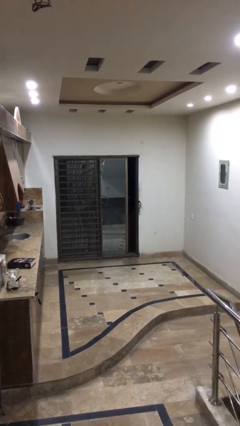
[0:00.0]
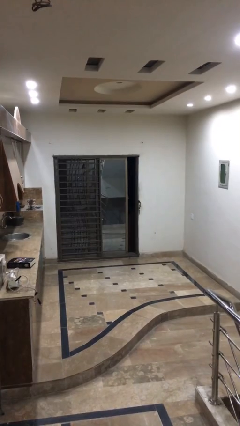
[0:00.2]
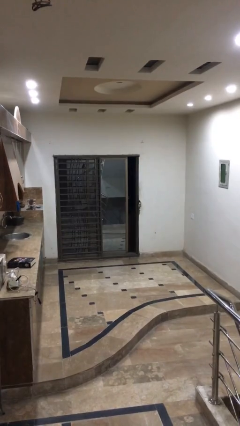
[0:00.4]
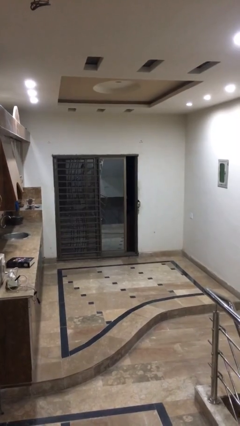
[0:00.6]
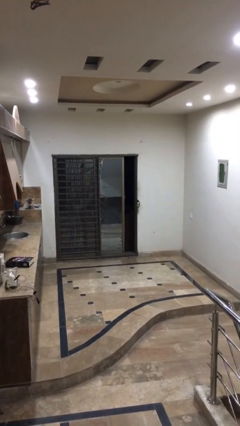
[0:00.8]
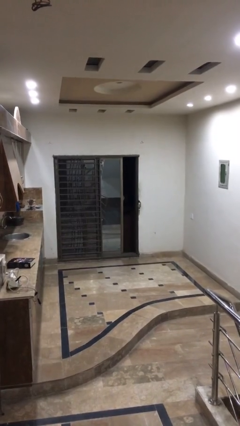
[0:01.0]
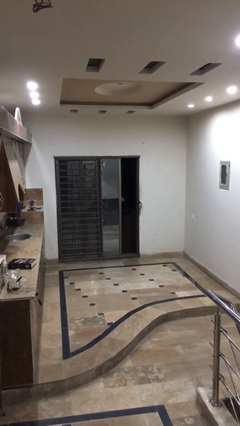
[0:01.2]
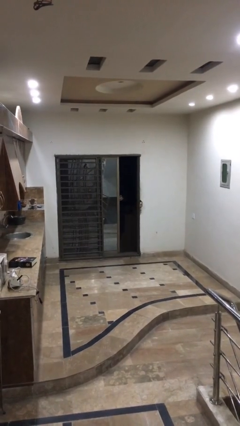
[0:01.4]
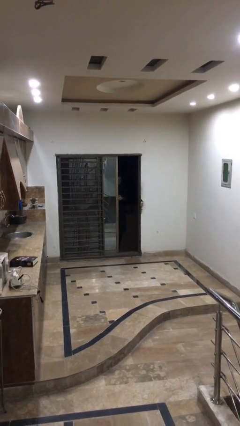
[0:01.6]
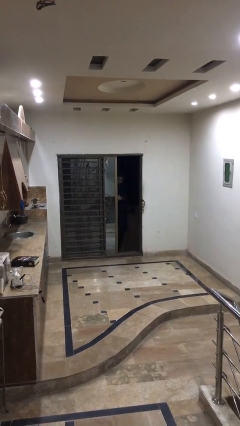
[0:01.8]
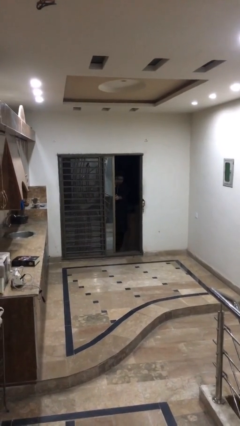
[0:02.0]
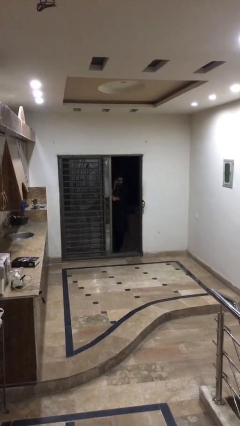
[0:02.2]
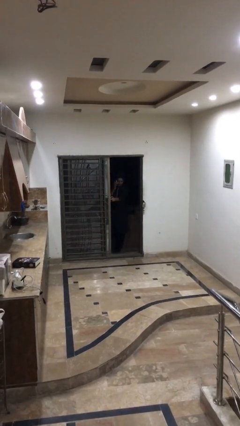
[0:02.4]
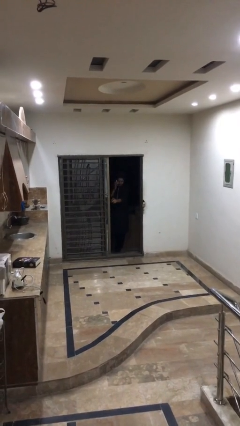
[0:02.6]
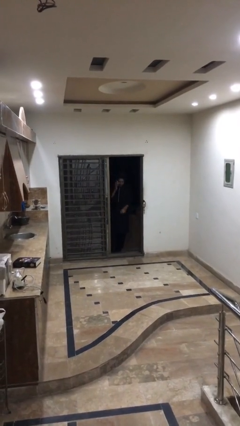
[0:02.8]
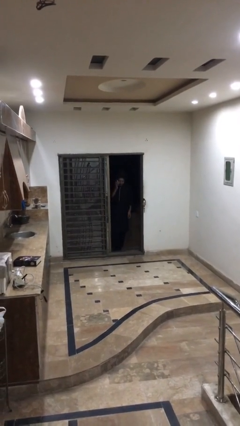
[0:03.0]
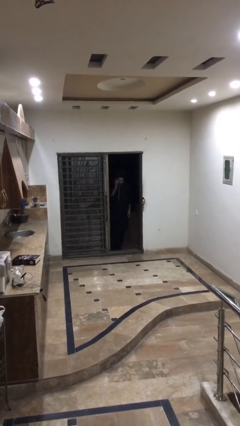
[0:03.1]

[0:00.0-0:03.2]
person opens facility door

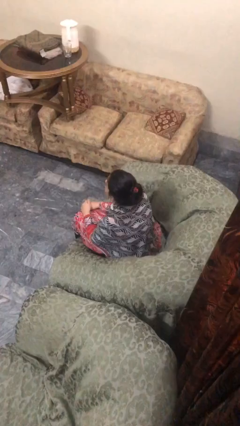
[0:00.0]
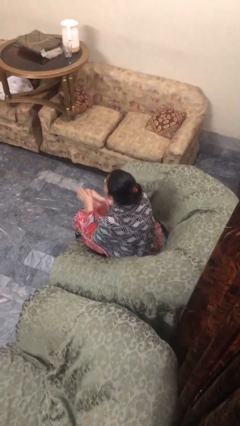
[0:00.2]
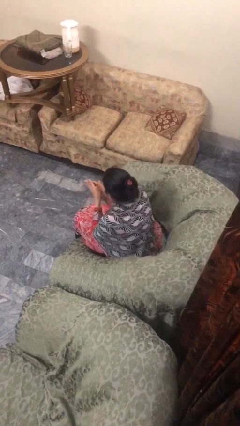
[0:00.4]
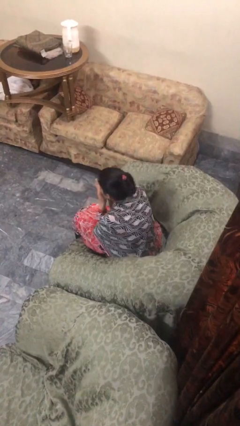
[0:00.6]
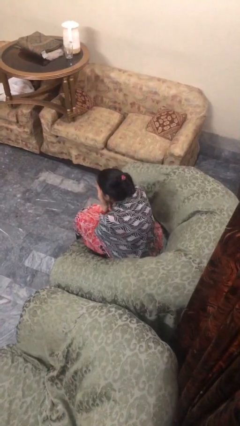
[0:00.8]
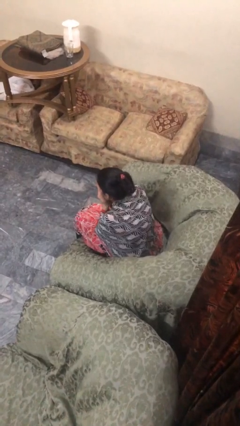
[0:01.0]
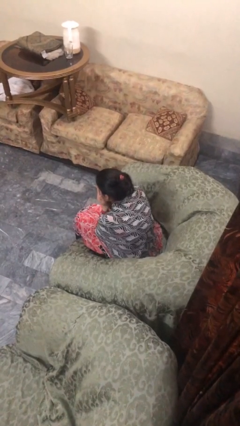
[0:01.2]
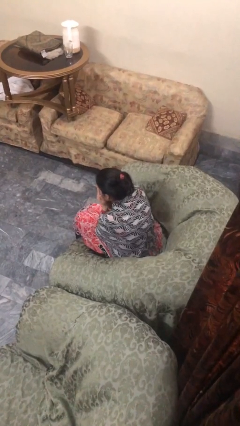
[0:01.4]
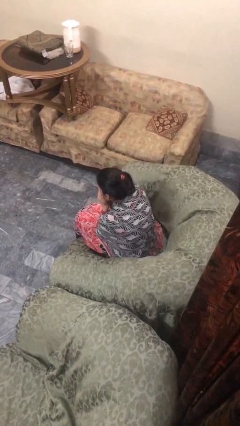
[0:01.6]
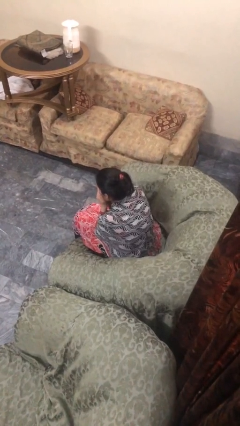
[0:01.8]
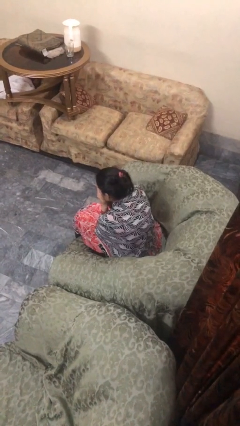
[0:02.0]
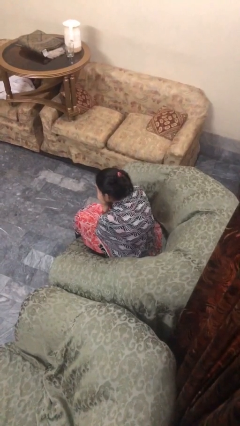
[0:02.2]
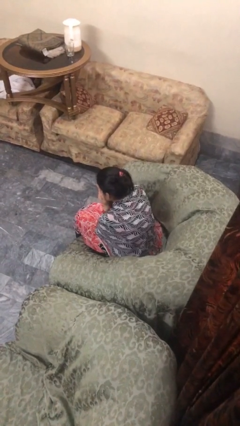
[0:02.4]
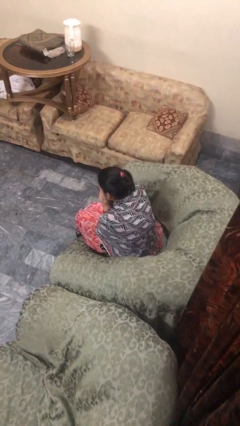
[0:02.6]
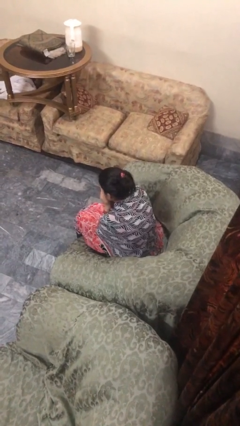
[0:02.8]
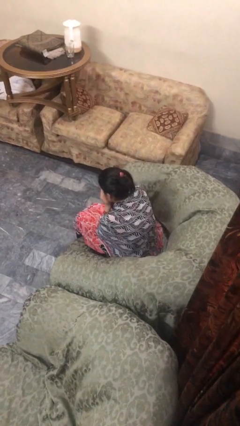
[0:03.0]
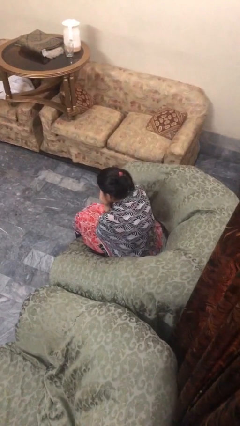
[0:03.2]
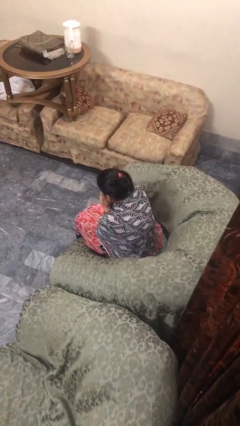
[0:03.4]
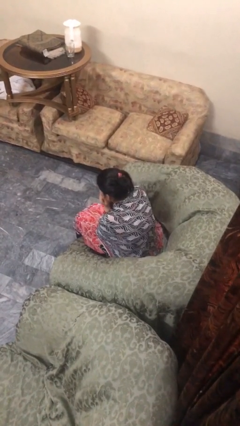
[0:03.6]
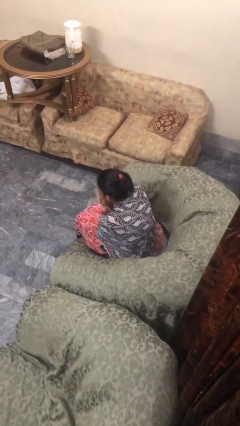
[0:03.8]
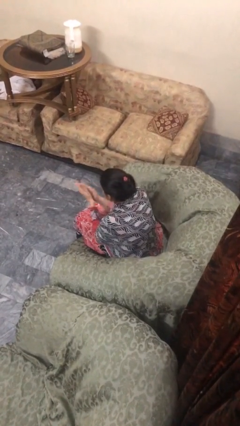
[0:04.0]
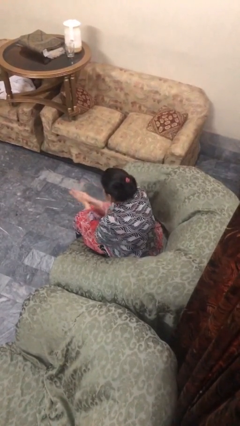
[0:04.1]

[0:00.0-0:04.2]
person rubs eyes

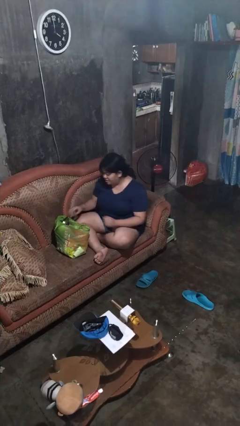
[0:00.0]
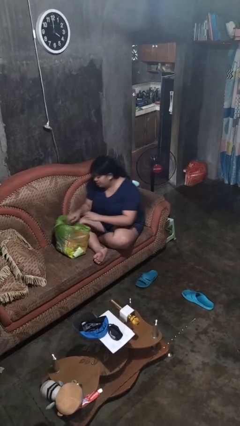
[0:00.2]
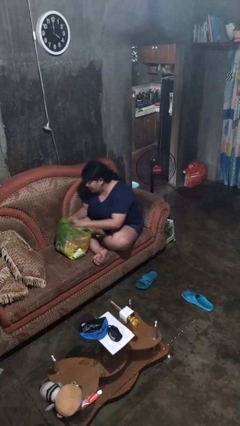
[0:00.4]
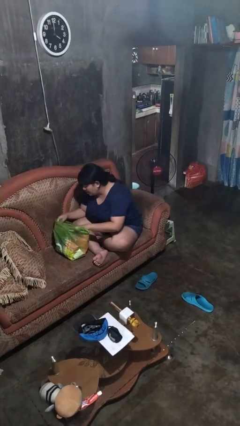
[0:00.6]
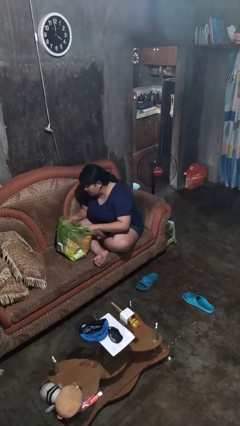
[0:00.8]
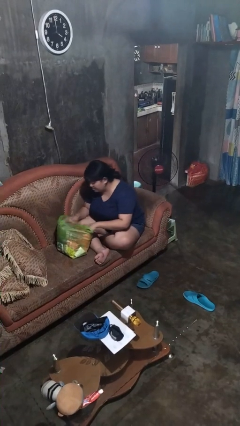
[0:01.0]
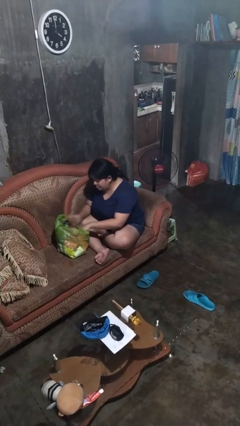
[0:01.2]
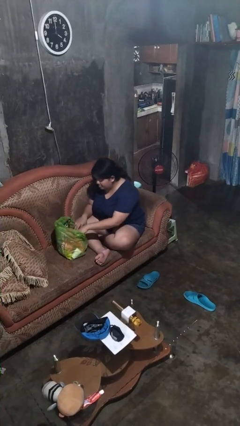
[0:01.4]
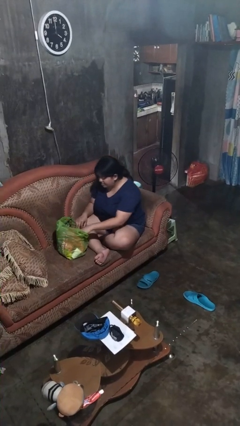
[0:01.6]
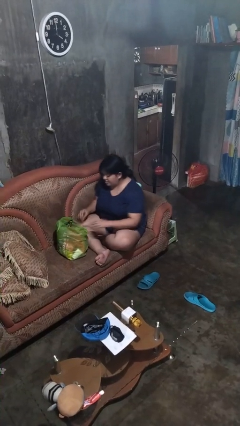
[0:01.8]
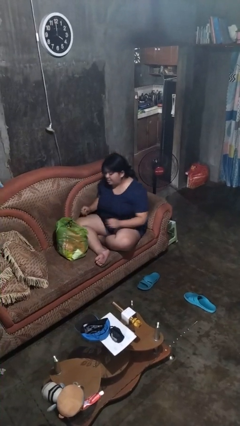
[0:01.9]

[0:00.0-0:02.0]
person searches in bag

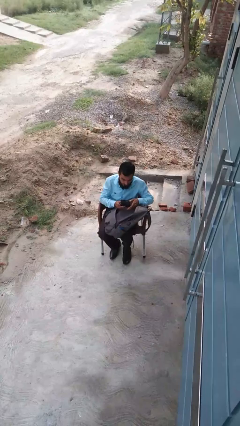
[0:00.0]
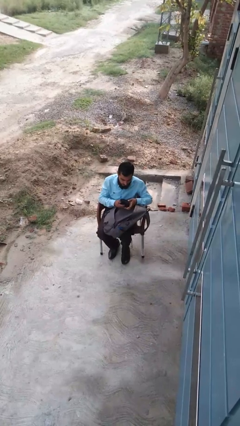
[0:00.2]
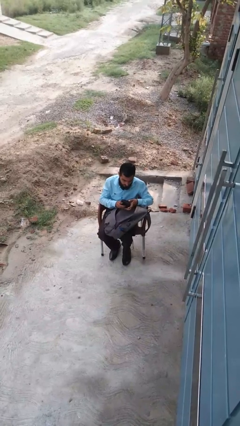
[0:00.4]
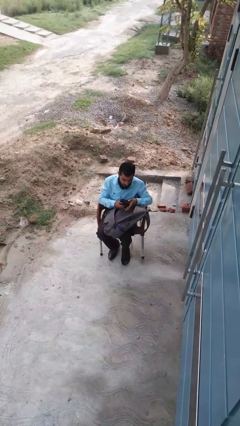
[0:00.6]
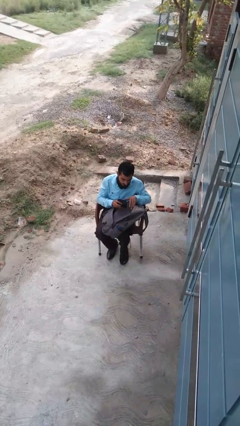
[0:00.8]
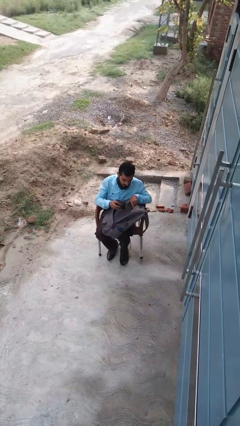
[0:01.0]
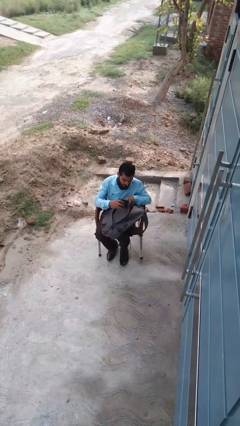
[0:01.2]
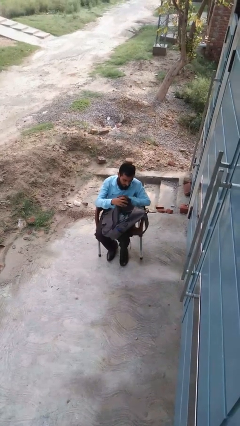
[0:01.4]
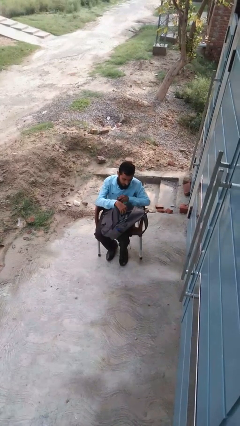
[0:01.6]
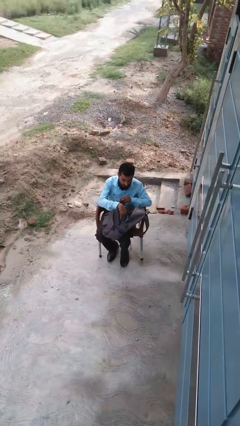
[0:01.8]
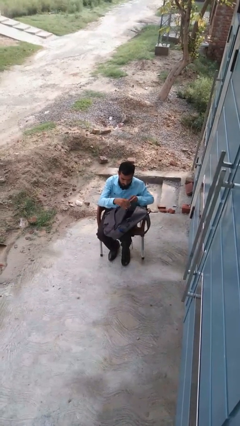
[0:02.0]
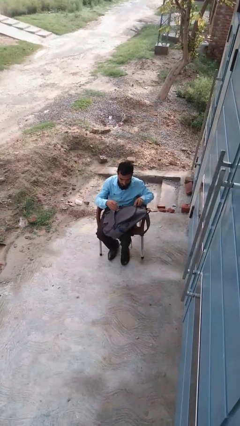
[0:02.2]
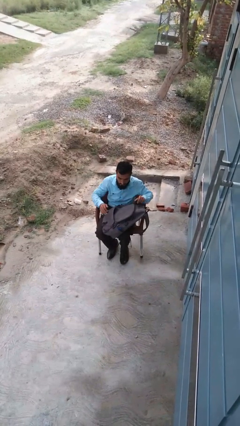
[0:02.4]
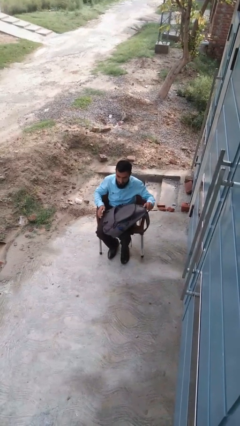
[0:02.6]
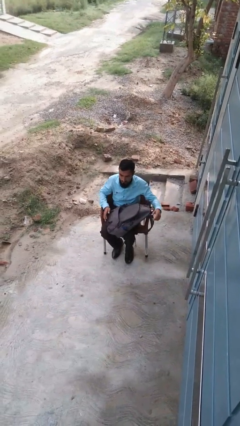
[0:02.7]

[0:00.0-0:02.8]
person puts object into backpack

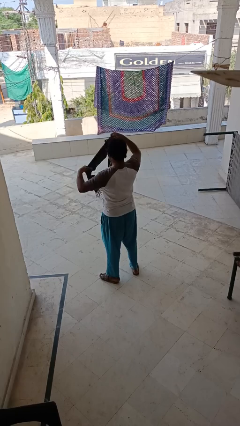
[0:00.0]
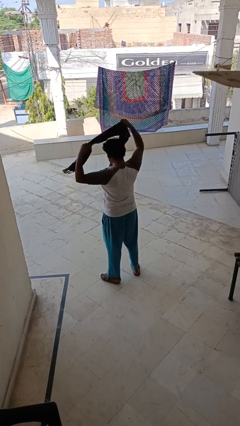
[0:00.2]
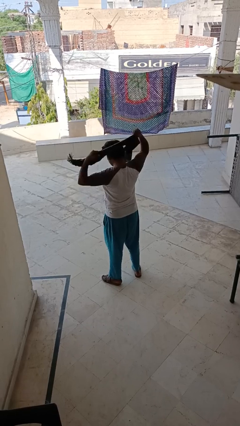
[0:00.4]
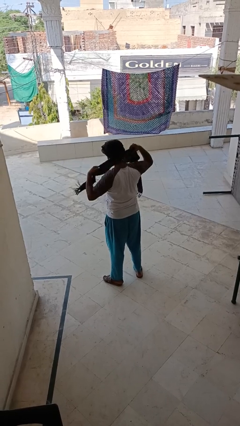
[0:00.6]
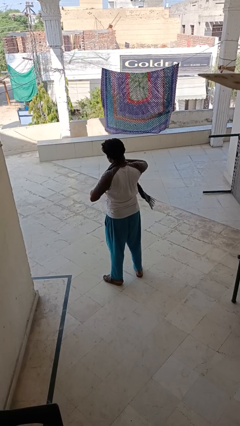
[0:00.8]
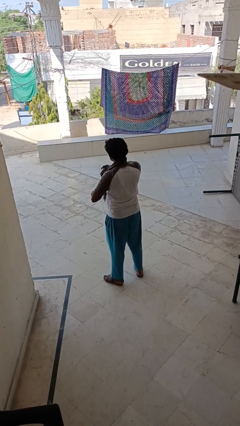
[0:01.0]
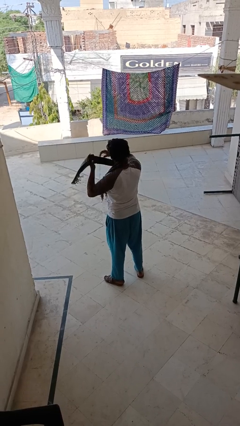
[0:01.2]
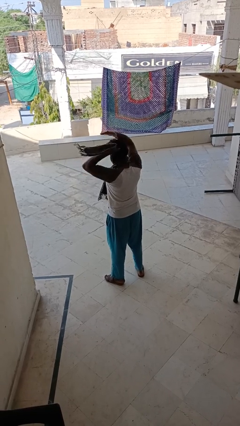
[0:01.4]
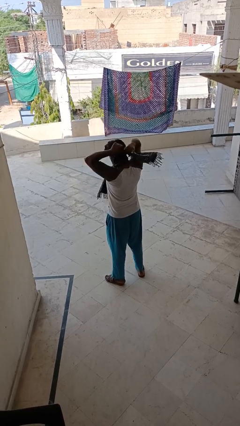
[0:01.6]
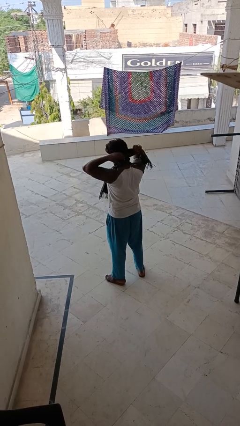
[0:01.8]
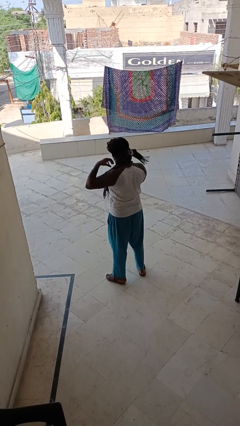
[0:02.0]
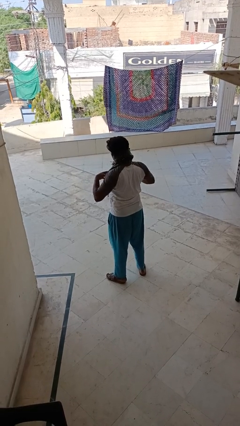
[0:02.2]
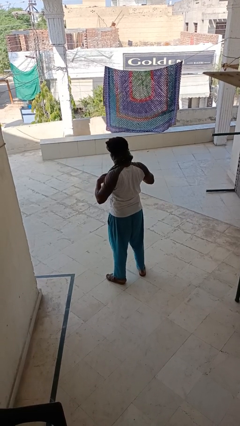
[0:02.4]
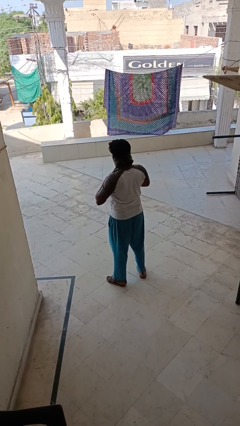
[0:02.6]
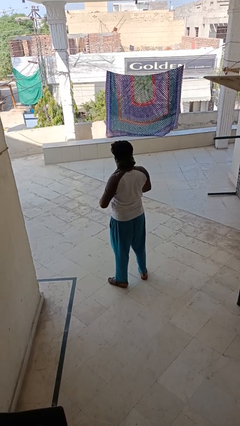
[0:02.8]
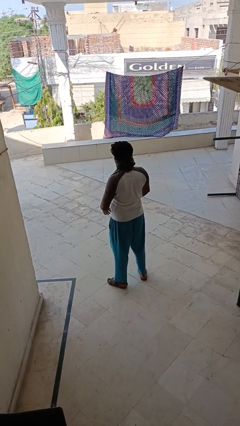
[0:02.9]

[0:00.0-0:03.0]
person puts on scarf

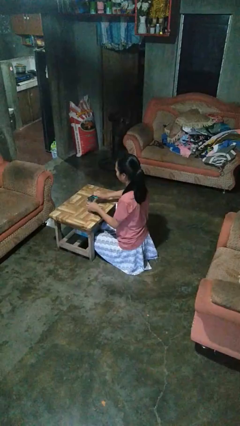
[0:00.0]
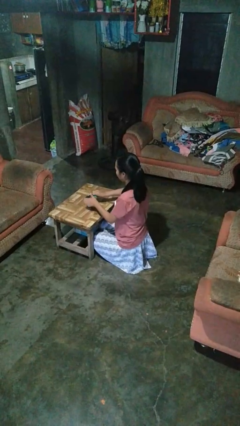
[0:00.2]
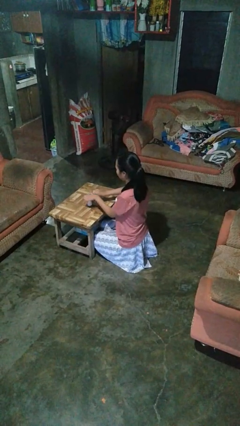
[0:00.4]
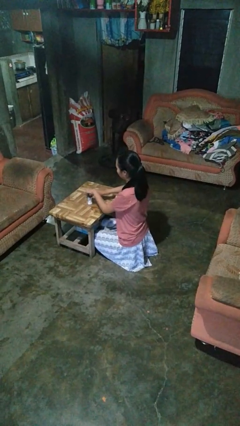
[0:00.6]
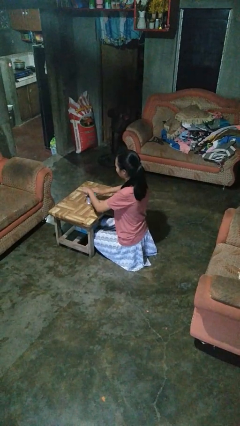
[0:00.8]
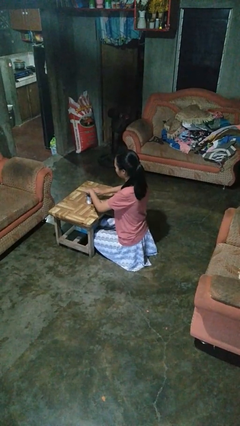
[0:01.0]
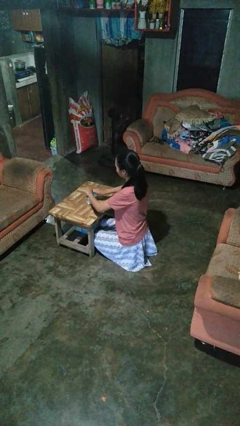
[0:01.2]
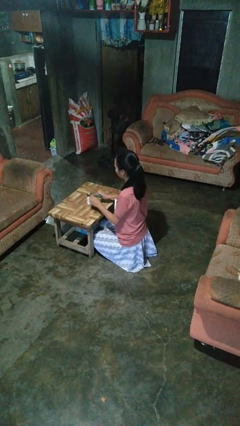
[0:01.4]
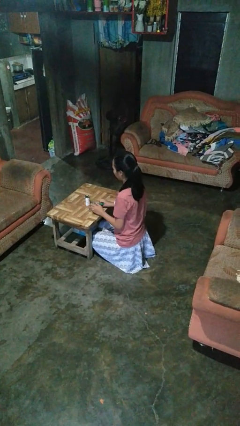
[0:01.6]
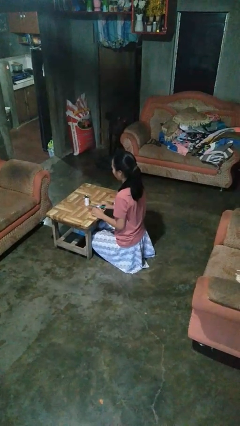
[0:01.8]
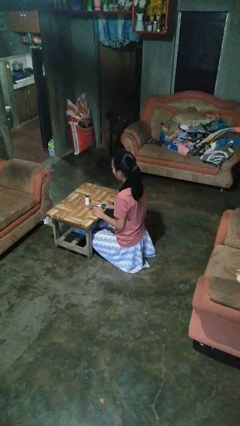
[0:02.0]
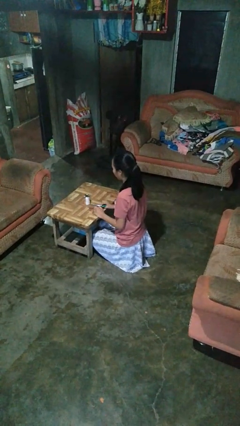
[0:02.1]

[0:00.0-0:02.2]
person opens can with can opener
